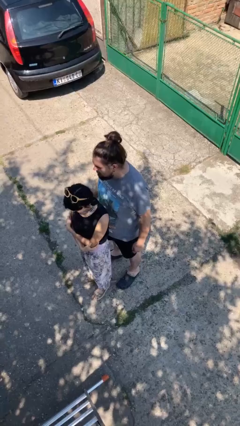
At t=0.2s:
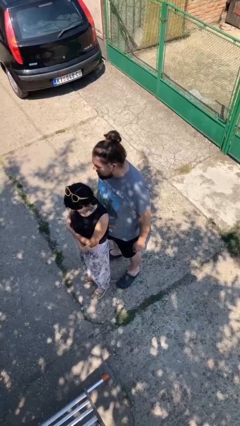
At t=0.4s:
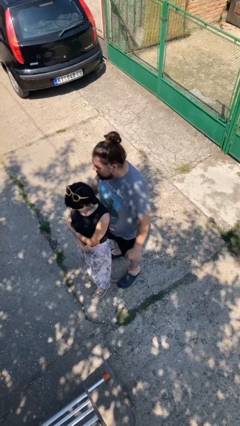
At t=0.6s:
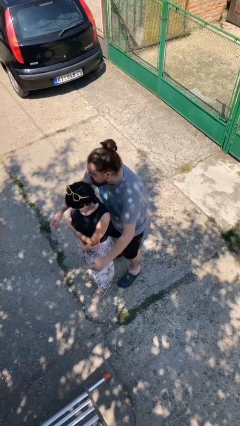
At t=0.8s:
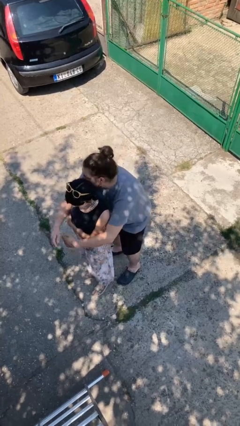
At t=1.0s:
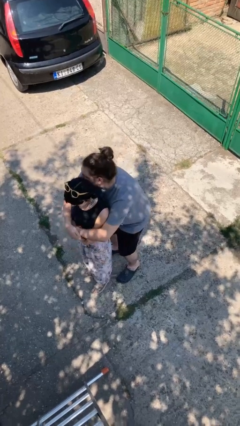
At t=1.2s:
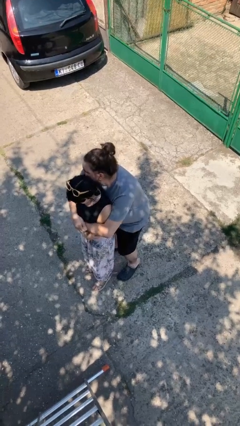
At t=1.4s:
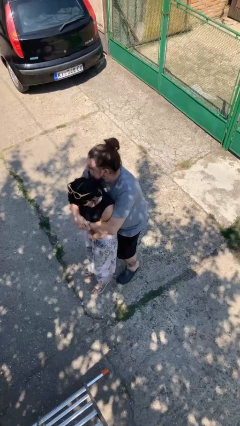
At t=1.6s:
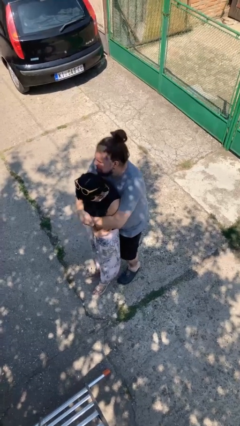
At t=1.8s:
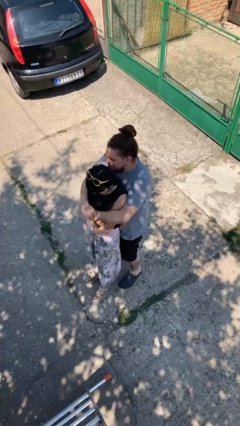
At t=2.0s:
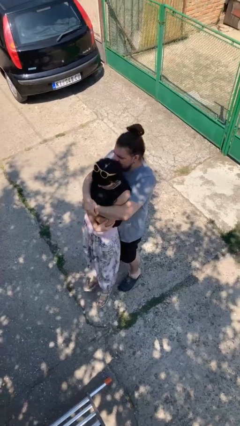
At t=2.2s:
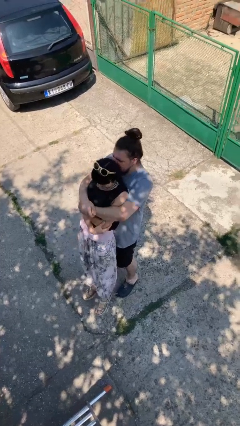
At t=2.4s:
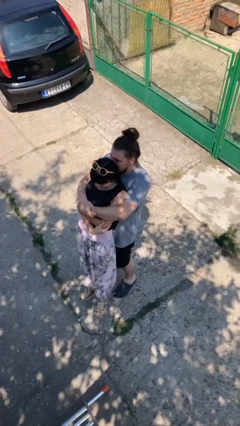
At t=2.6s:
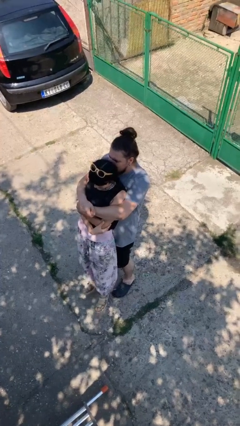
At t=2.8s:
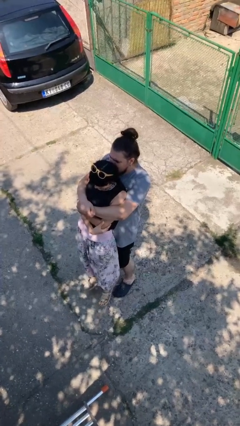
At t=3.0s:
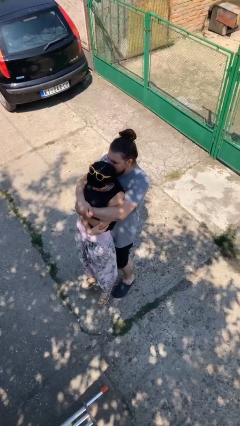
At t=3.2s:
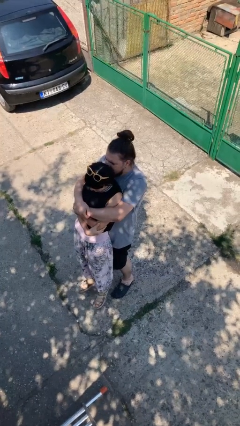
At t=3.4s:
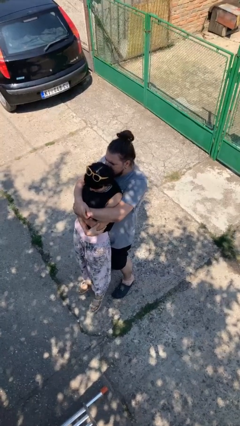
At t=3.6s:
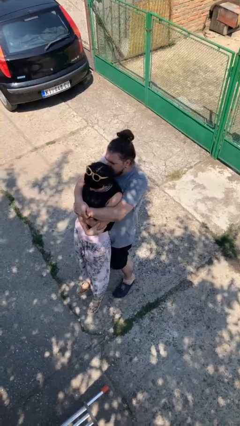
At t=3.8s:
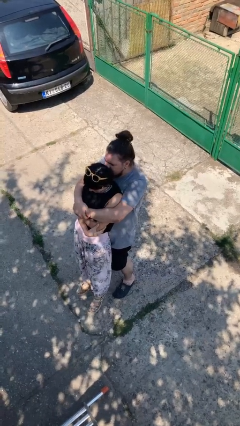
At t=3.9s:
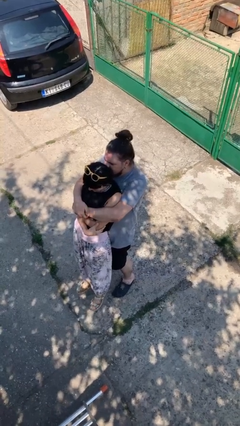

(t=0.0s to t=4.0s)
person picks up person

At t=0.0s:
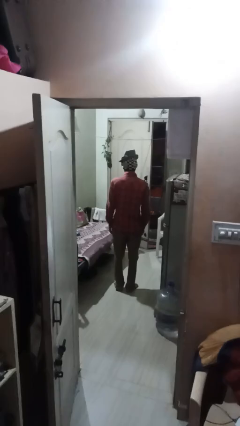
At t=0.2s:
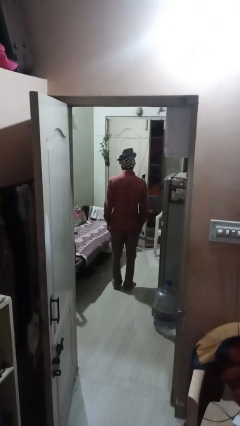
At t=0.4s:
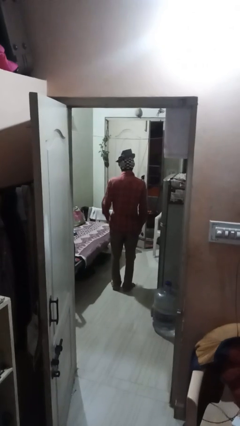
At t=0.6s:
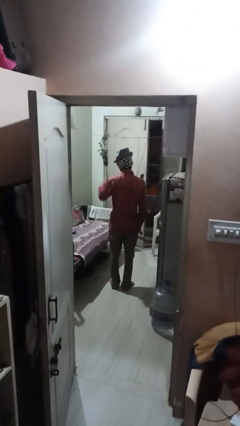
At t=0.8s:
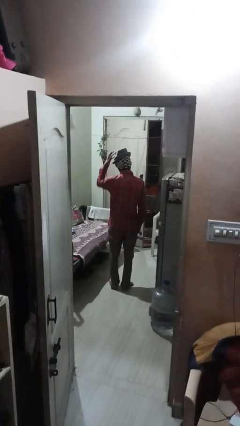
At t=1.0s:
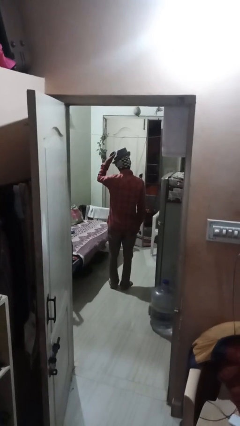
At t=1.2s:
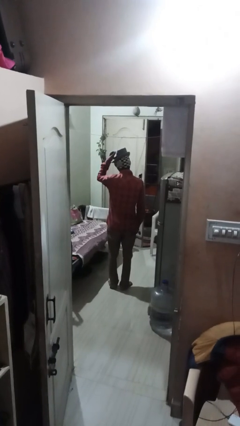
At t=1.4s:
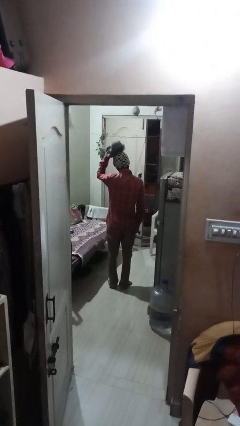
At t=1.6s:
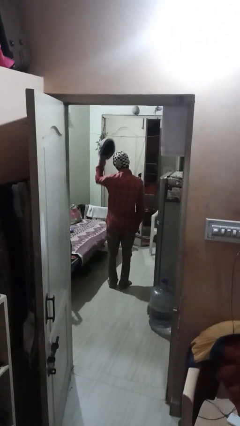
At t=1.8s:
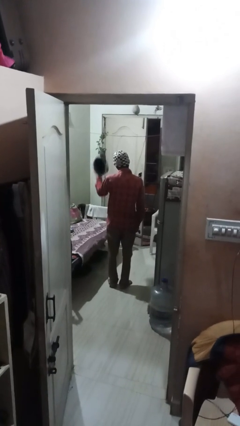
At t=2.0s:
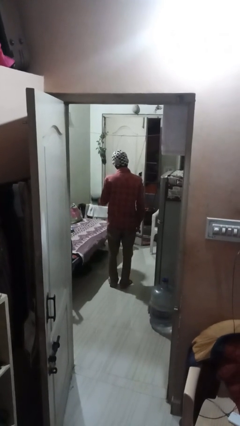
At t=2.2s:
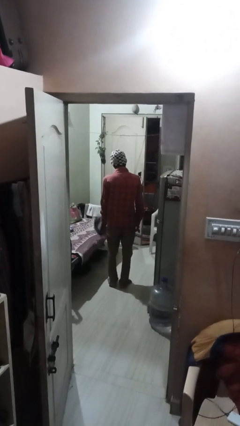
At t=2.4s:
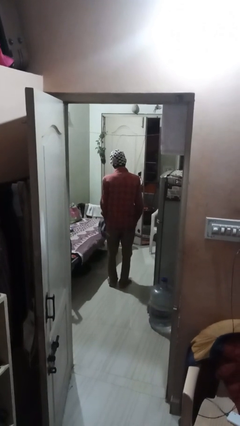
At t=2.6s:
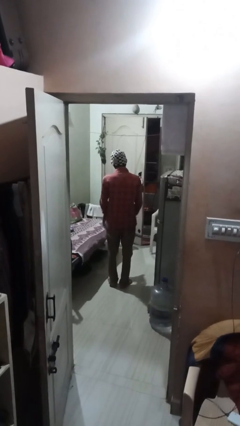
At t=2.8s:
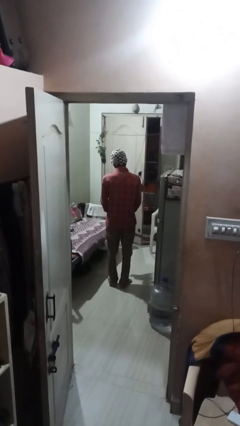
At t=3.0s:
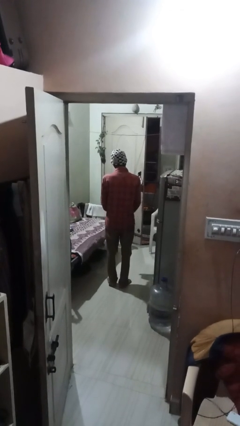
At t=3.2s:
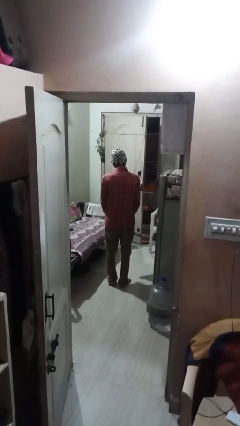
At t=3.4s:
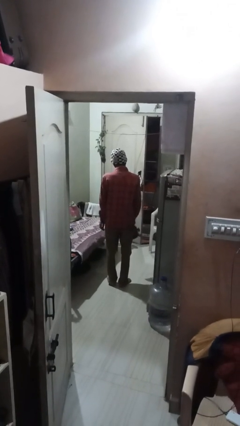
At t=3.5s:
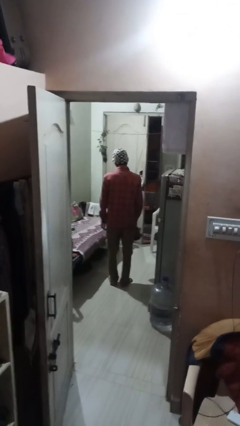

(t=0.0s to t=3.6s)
person takes off hat

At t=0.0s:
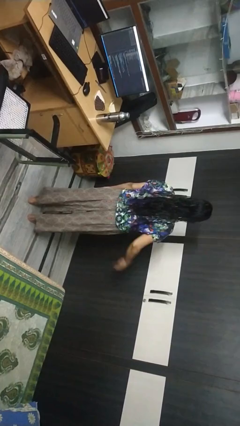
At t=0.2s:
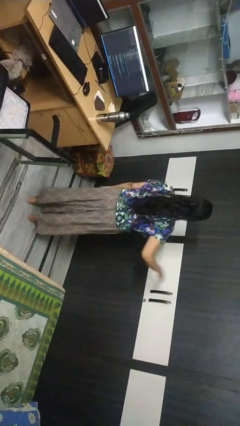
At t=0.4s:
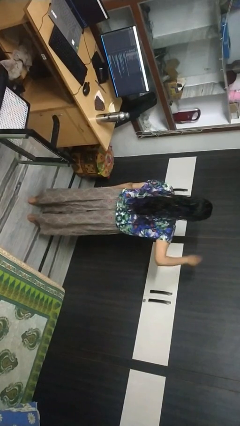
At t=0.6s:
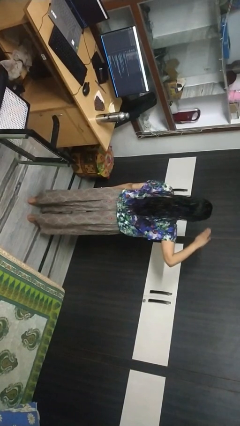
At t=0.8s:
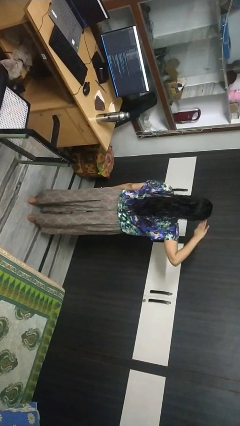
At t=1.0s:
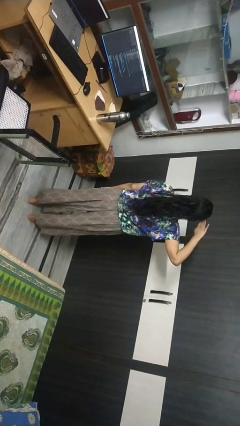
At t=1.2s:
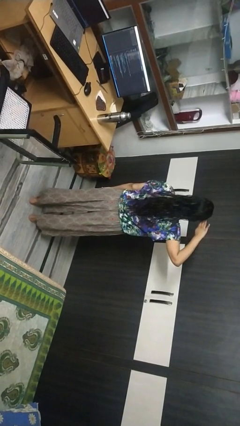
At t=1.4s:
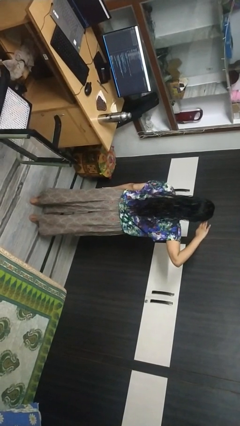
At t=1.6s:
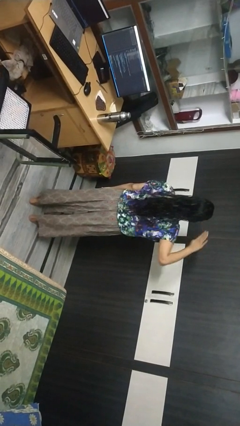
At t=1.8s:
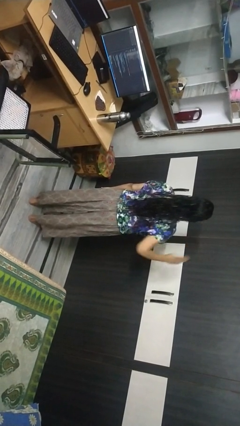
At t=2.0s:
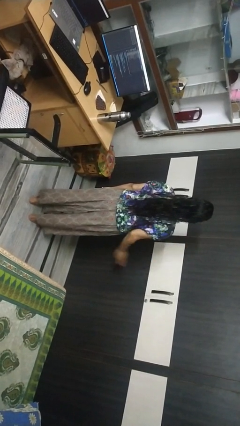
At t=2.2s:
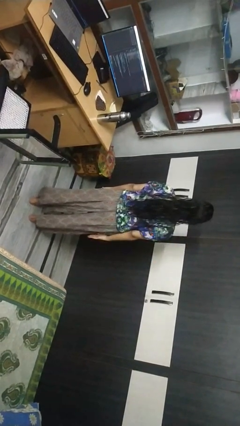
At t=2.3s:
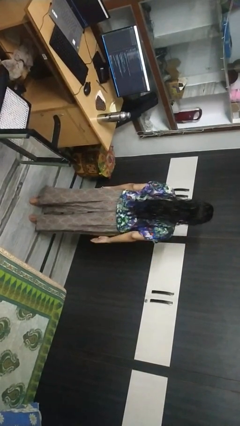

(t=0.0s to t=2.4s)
person salutes

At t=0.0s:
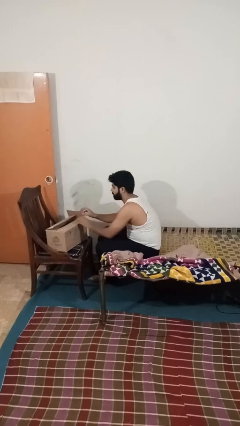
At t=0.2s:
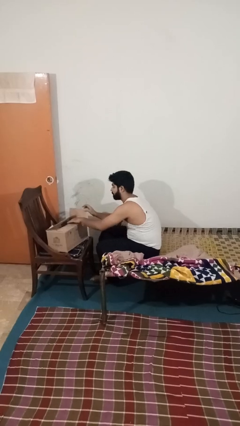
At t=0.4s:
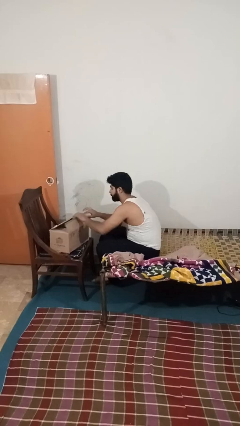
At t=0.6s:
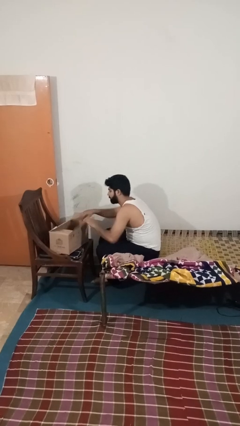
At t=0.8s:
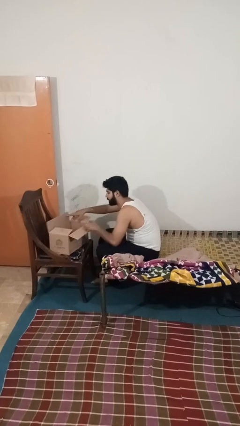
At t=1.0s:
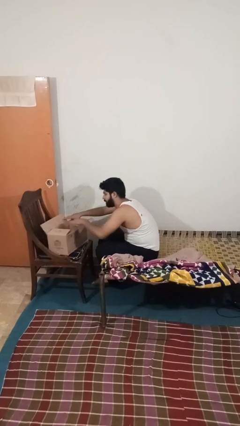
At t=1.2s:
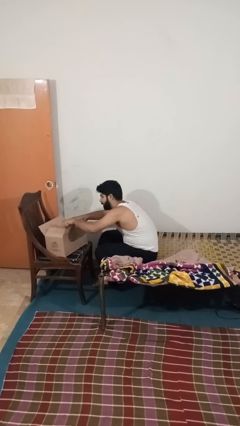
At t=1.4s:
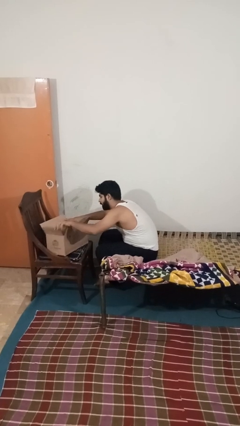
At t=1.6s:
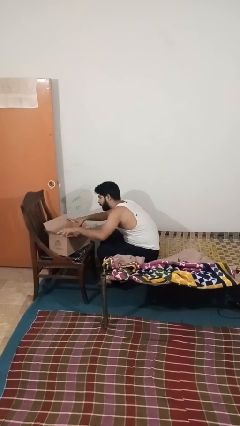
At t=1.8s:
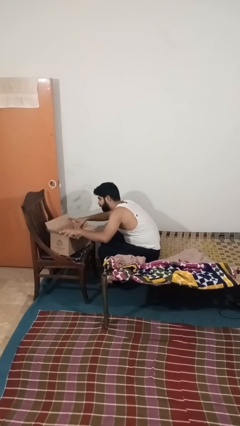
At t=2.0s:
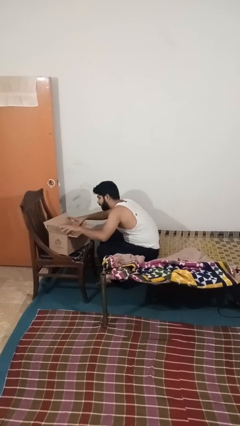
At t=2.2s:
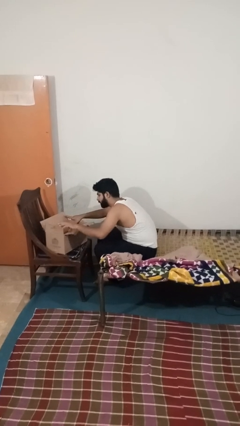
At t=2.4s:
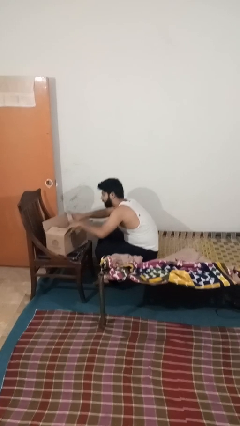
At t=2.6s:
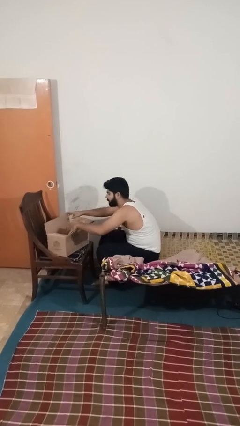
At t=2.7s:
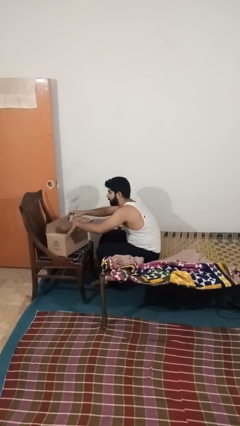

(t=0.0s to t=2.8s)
person opens box

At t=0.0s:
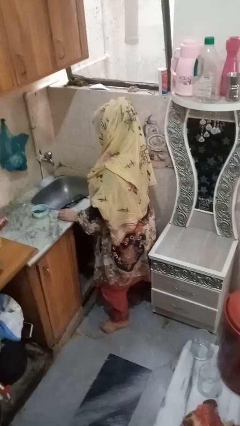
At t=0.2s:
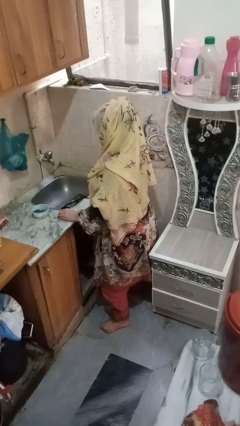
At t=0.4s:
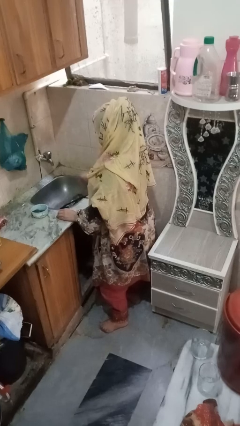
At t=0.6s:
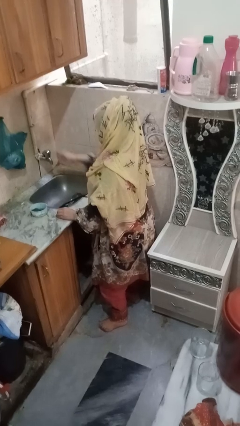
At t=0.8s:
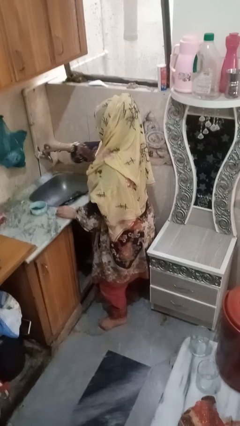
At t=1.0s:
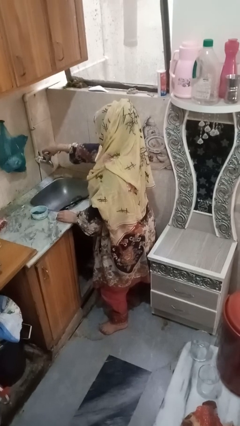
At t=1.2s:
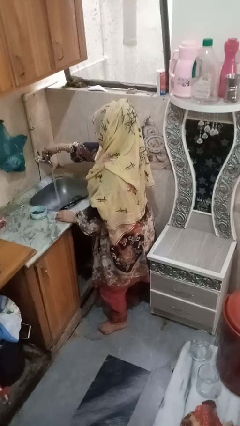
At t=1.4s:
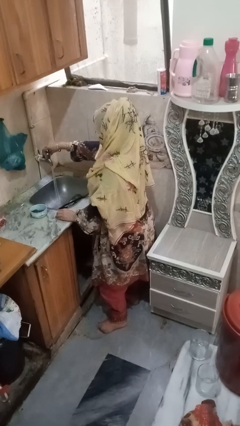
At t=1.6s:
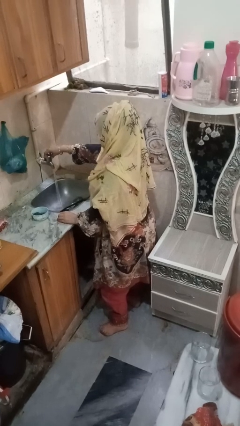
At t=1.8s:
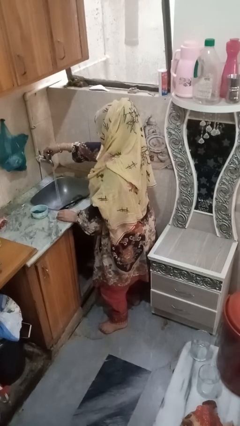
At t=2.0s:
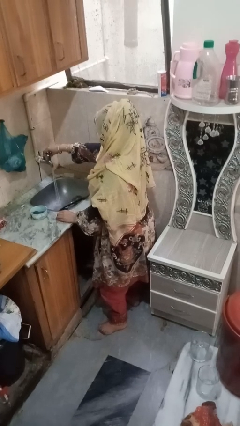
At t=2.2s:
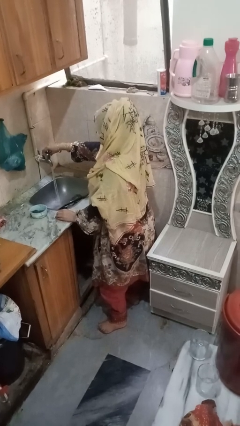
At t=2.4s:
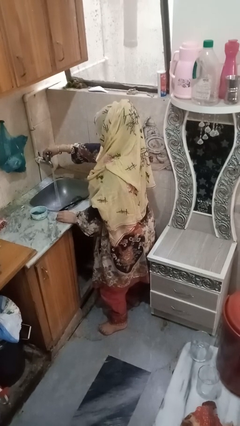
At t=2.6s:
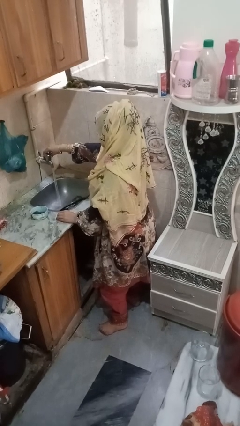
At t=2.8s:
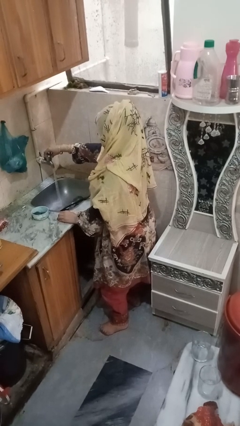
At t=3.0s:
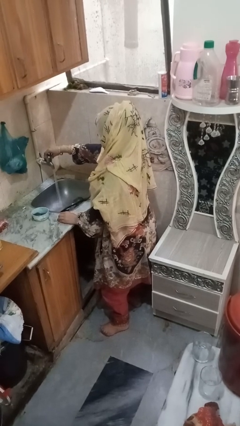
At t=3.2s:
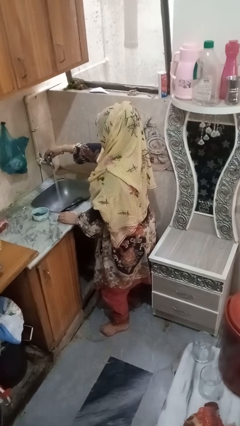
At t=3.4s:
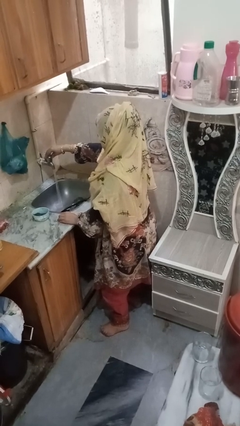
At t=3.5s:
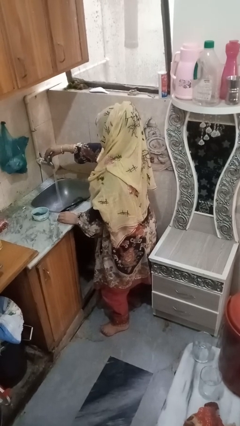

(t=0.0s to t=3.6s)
person turns on faucet

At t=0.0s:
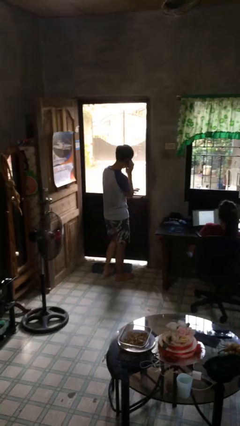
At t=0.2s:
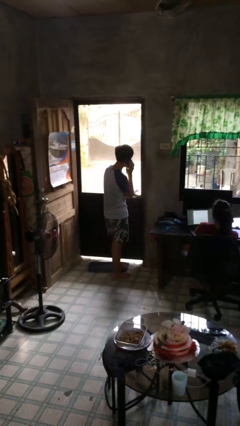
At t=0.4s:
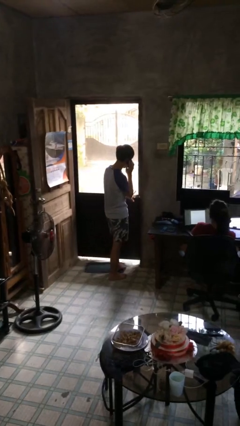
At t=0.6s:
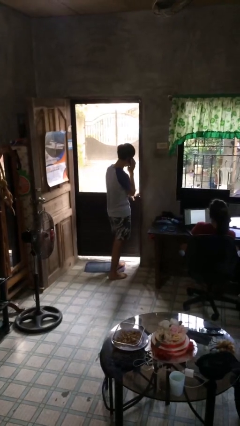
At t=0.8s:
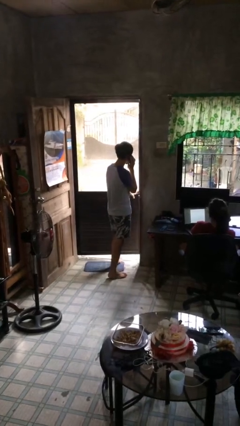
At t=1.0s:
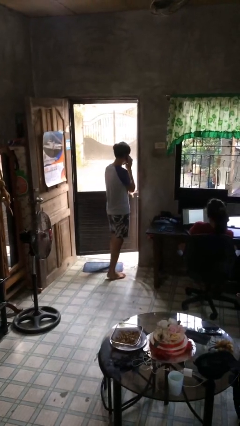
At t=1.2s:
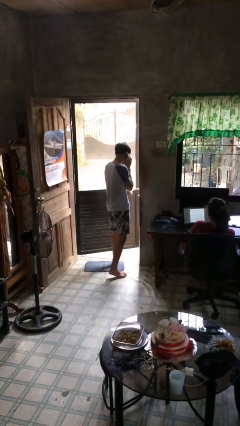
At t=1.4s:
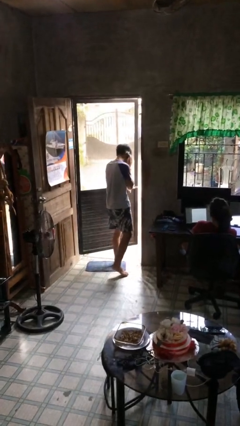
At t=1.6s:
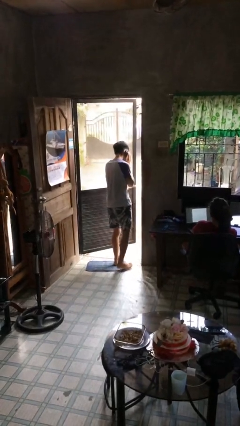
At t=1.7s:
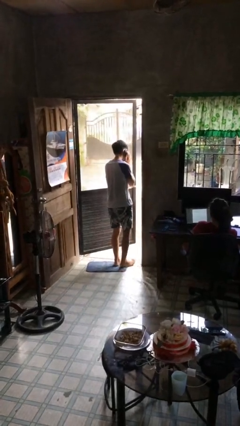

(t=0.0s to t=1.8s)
person opens facility door
